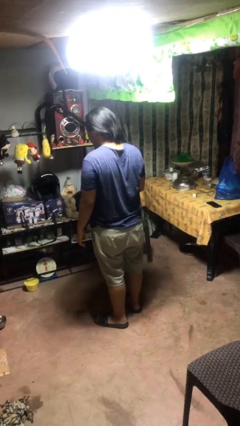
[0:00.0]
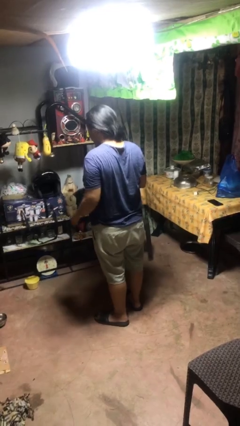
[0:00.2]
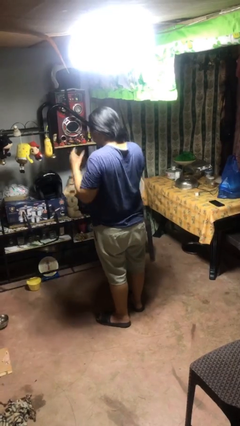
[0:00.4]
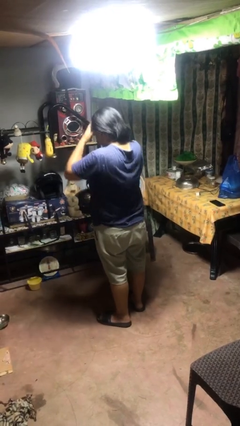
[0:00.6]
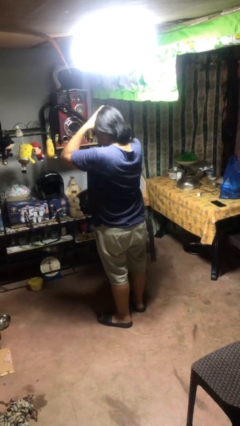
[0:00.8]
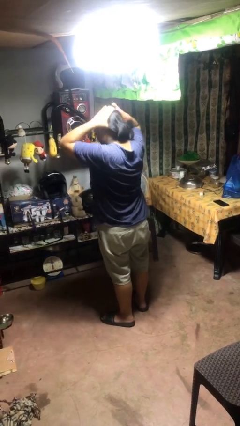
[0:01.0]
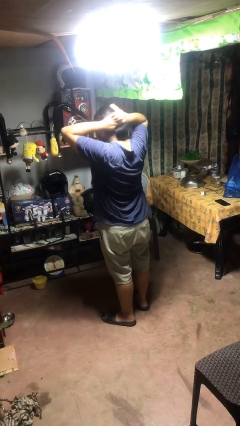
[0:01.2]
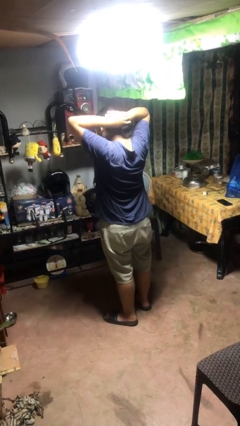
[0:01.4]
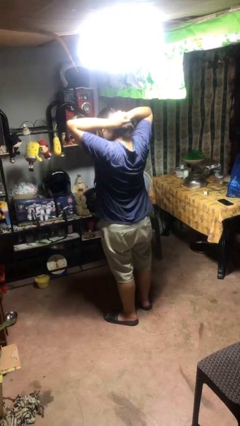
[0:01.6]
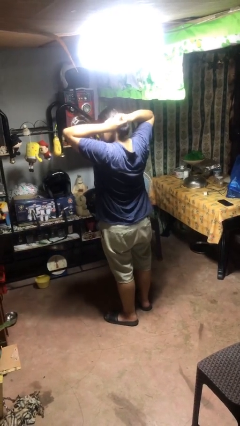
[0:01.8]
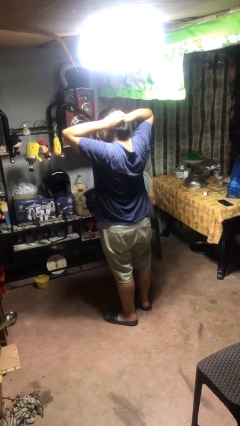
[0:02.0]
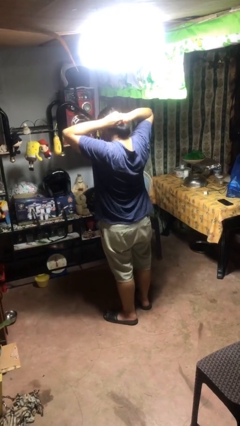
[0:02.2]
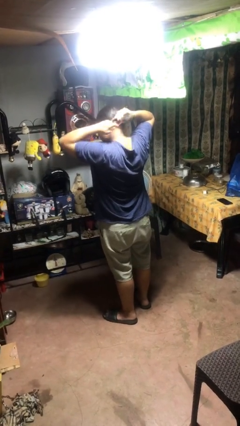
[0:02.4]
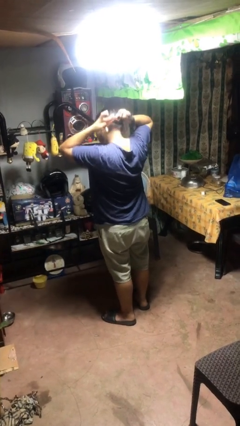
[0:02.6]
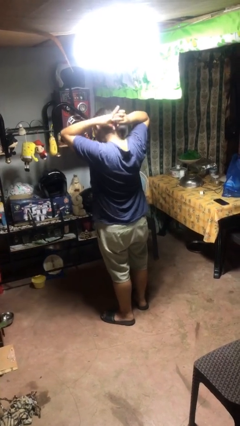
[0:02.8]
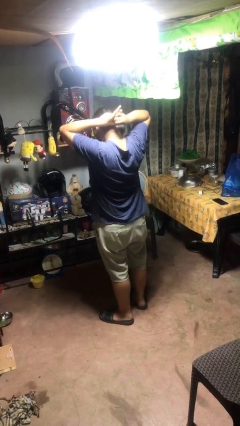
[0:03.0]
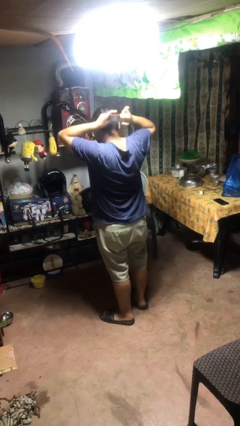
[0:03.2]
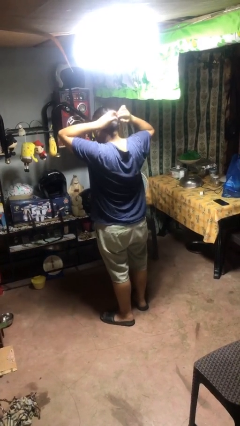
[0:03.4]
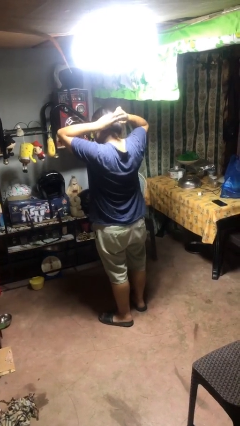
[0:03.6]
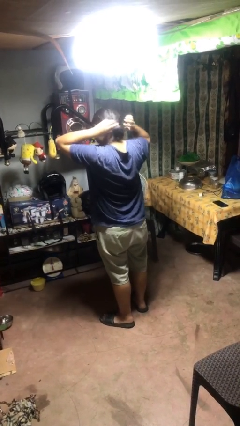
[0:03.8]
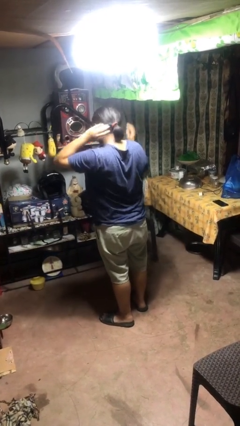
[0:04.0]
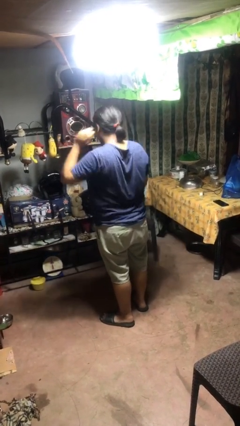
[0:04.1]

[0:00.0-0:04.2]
person puts hair in ponytail

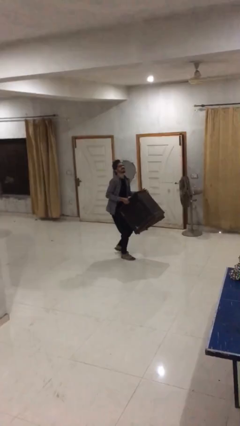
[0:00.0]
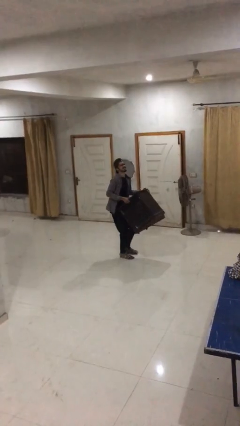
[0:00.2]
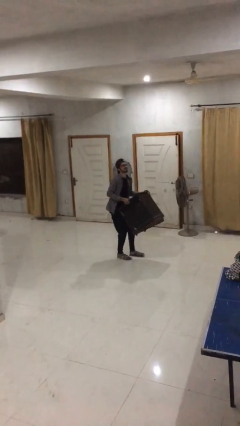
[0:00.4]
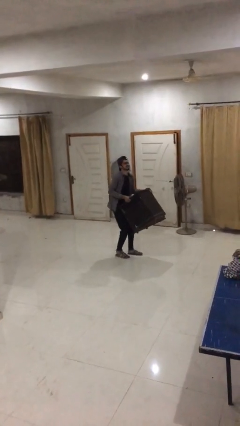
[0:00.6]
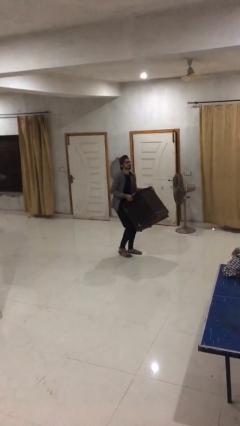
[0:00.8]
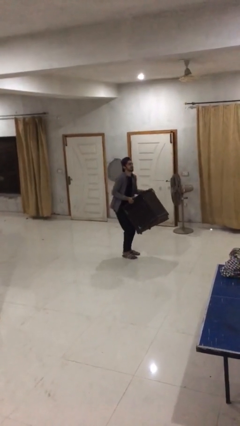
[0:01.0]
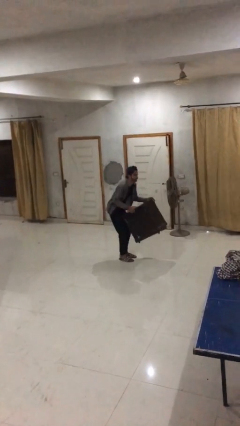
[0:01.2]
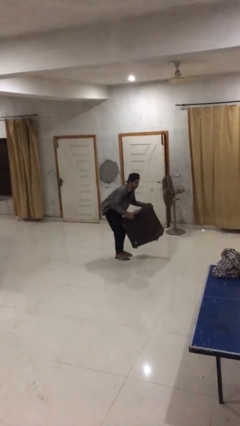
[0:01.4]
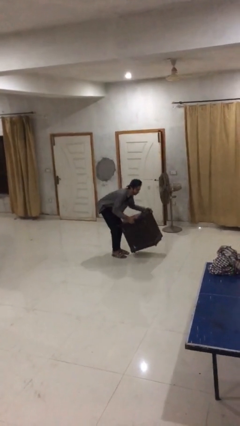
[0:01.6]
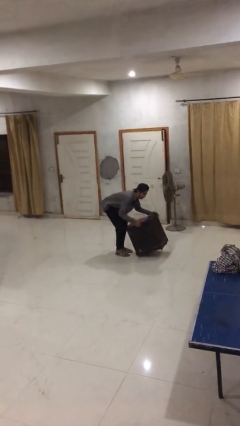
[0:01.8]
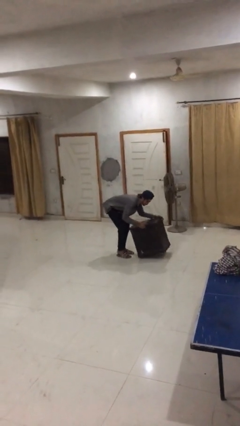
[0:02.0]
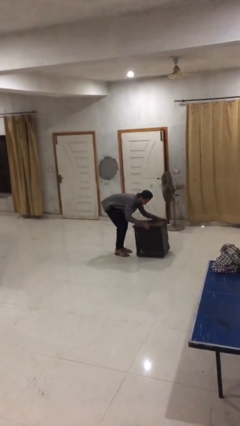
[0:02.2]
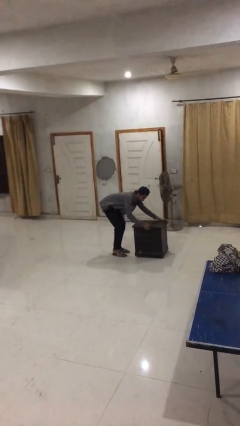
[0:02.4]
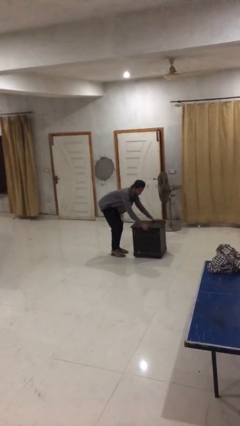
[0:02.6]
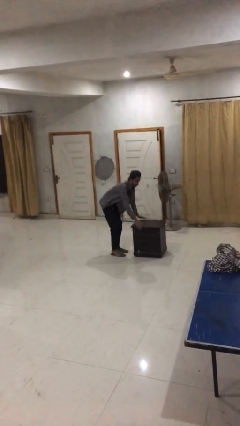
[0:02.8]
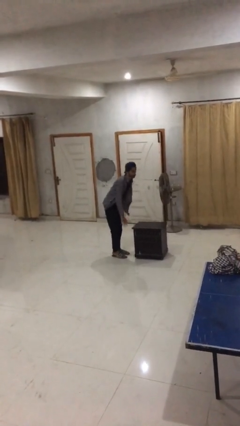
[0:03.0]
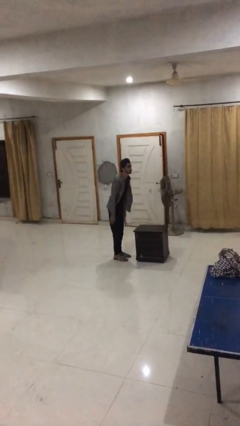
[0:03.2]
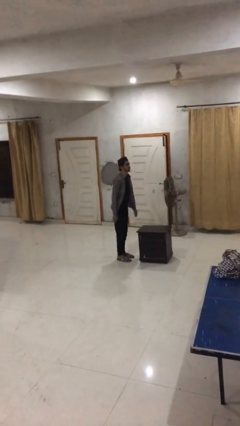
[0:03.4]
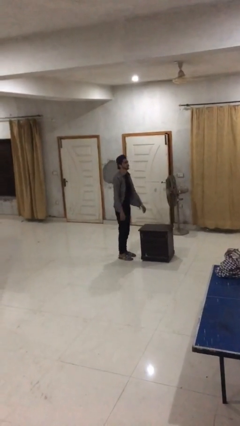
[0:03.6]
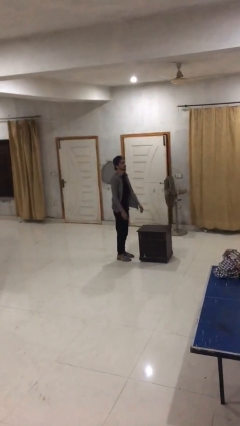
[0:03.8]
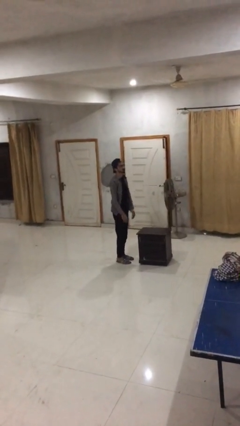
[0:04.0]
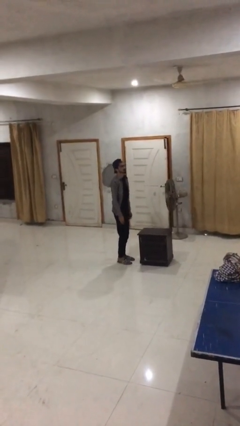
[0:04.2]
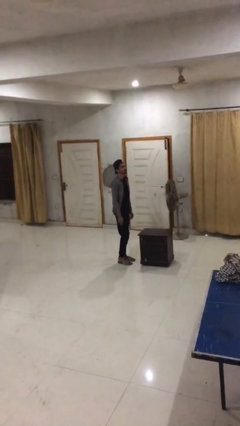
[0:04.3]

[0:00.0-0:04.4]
person puts down object on floor

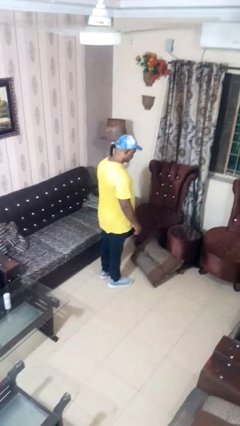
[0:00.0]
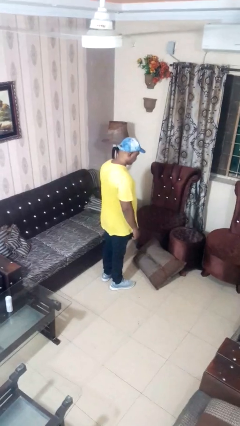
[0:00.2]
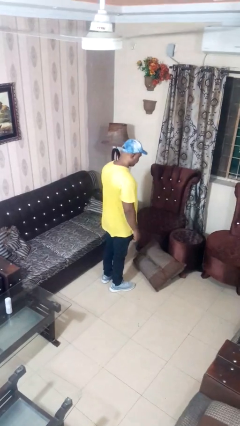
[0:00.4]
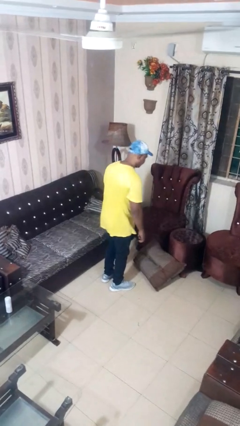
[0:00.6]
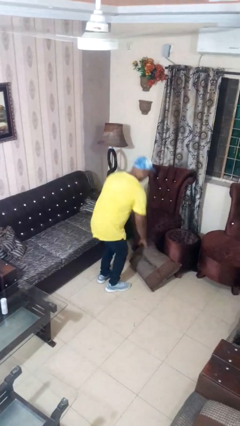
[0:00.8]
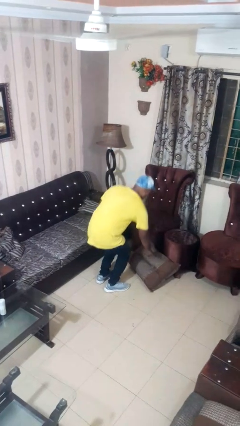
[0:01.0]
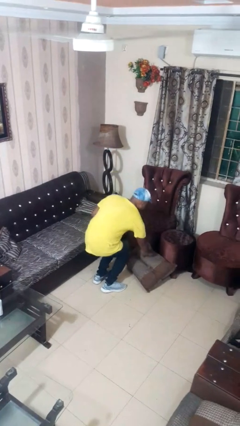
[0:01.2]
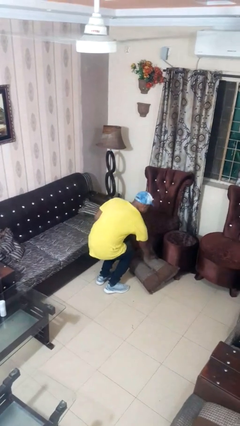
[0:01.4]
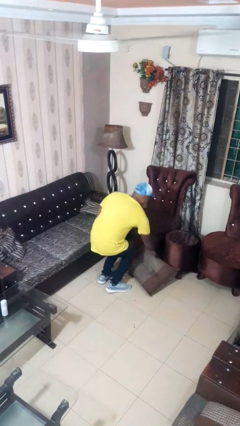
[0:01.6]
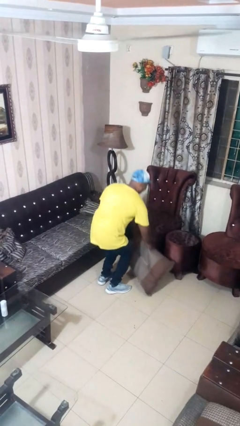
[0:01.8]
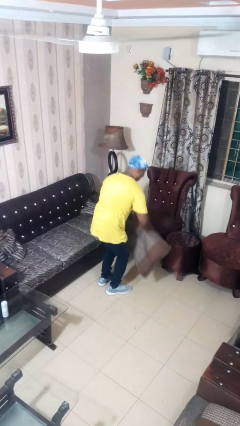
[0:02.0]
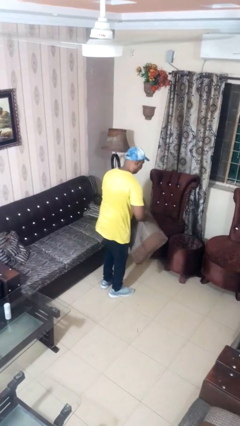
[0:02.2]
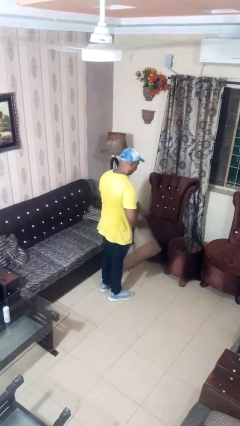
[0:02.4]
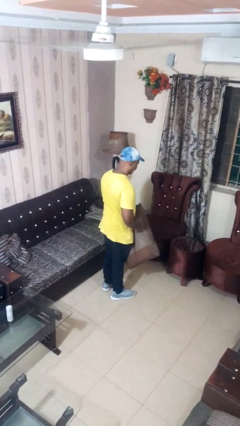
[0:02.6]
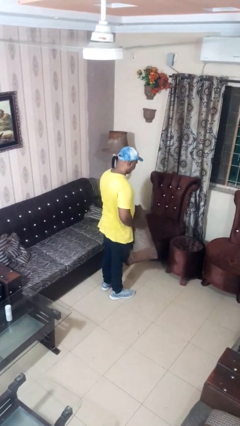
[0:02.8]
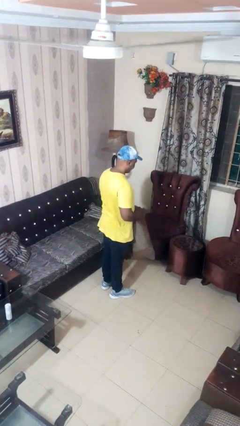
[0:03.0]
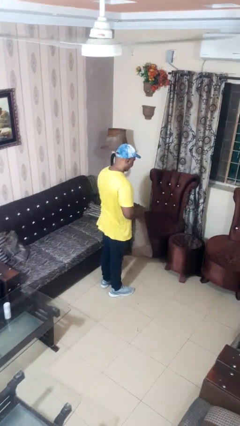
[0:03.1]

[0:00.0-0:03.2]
person picks up object from floor

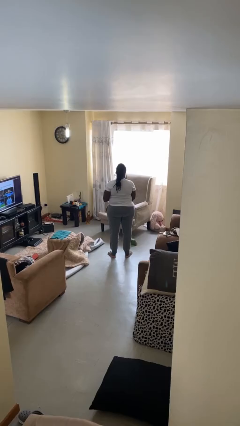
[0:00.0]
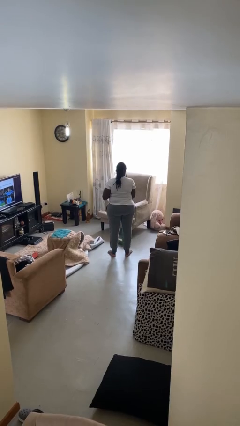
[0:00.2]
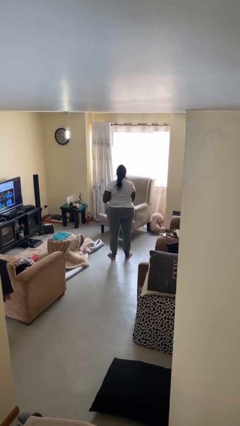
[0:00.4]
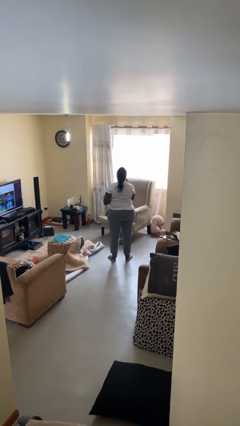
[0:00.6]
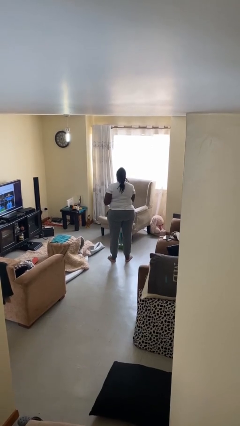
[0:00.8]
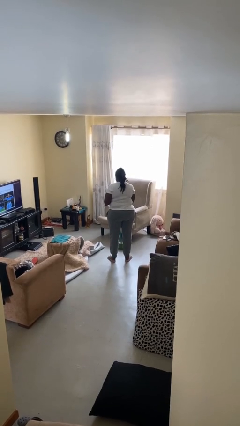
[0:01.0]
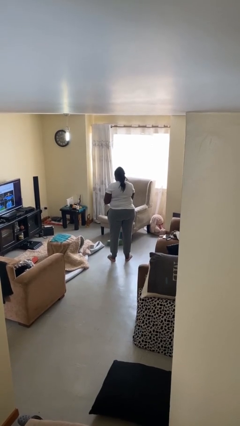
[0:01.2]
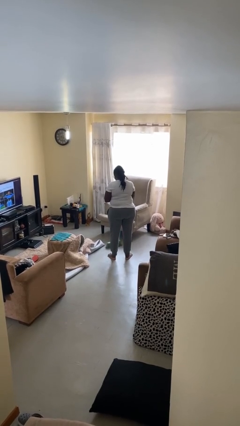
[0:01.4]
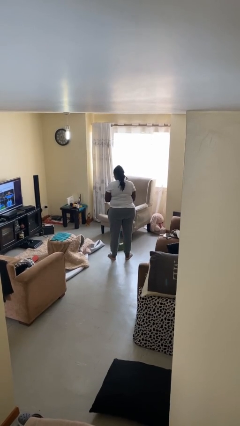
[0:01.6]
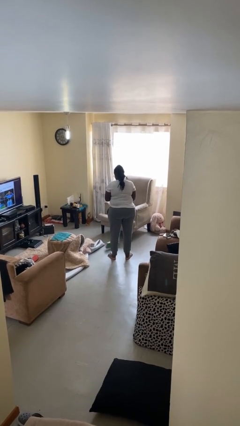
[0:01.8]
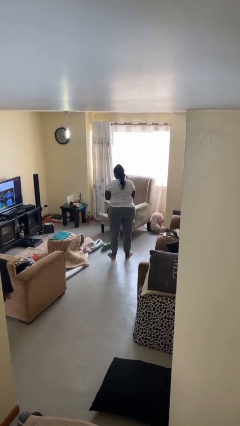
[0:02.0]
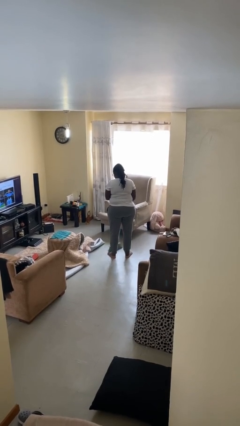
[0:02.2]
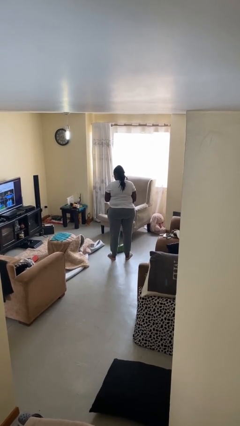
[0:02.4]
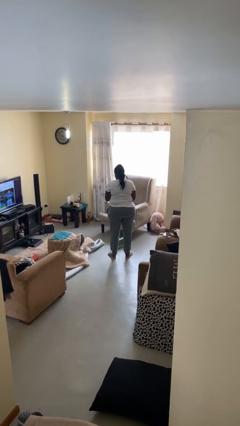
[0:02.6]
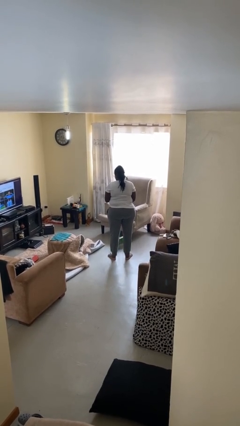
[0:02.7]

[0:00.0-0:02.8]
person sweeps floor

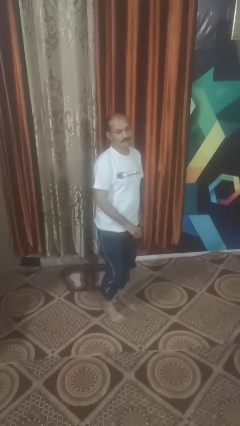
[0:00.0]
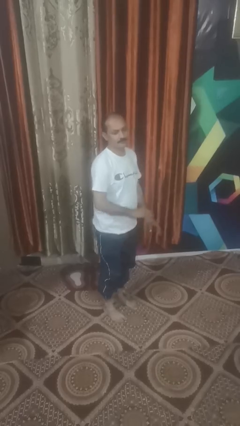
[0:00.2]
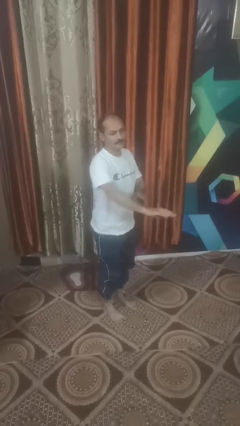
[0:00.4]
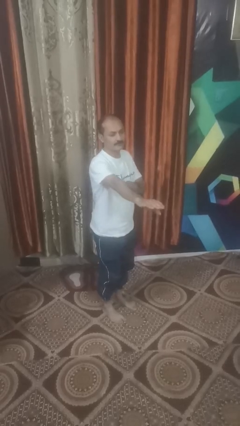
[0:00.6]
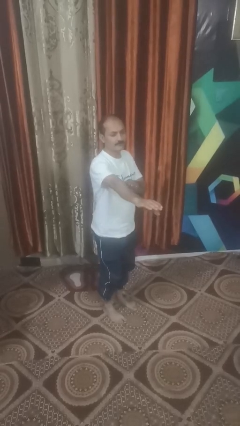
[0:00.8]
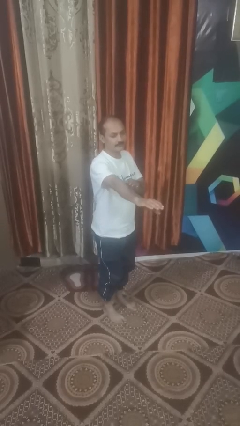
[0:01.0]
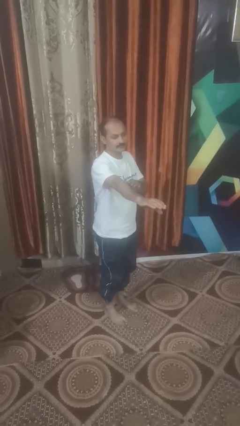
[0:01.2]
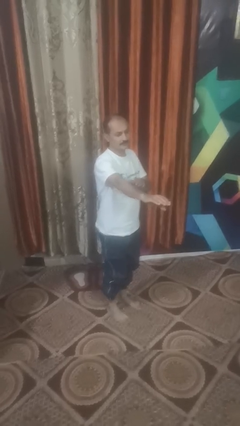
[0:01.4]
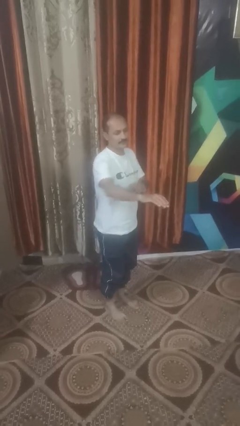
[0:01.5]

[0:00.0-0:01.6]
person karate chop

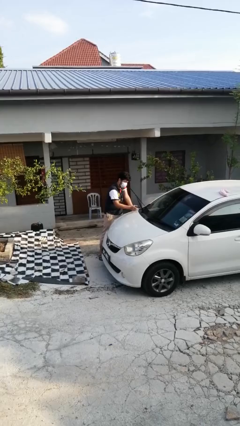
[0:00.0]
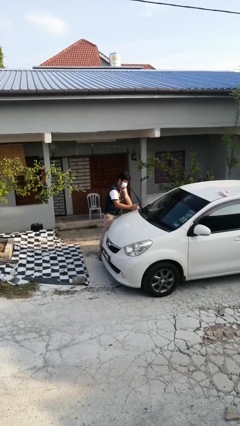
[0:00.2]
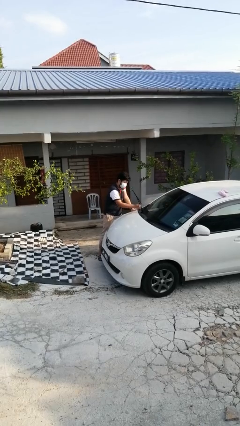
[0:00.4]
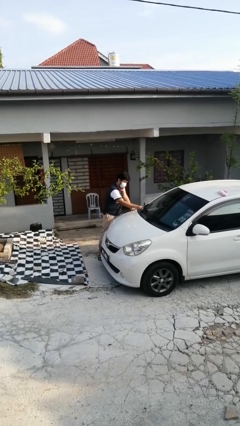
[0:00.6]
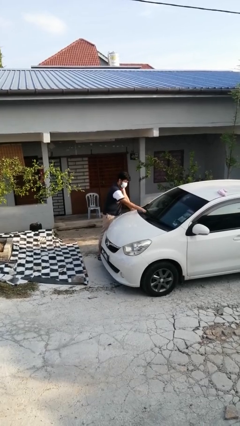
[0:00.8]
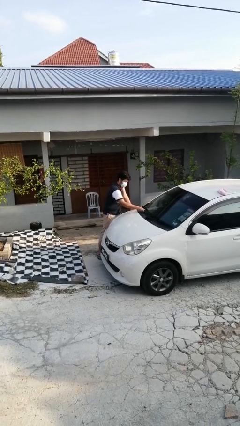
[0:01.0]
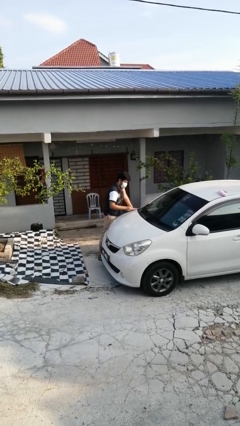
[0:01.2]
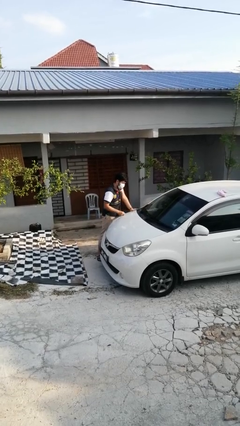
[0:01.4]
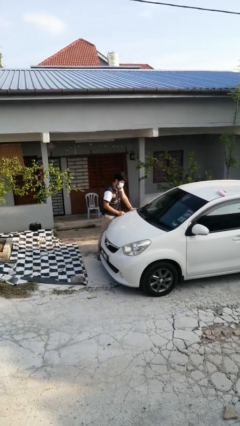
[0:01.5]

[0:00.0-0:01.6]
person flips down car wipers
